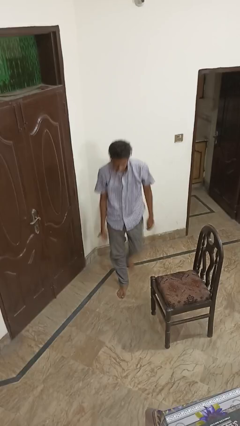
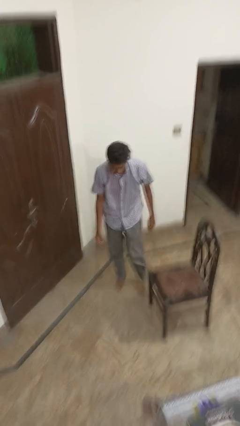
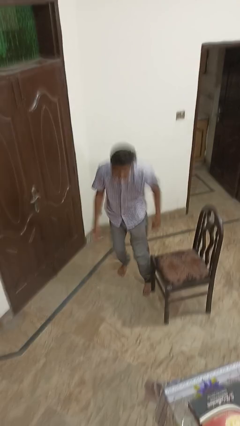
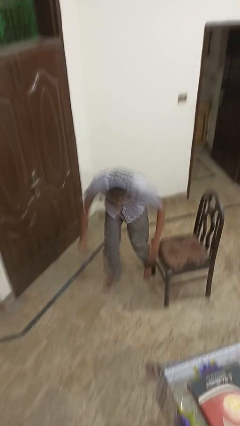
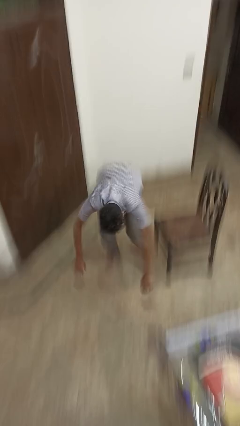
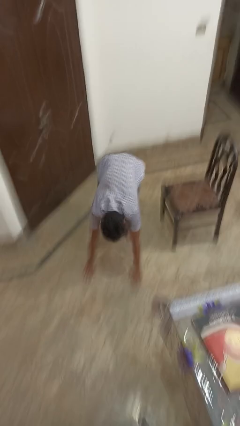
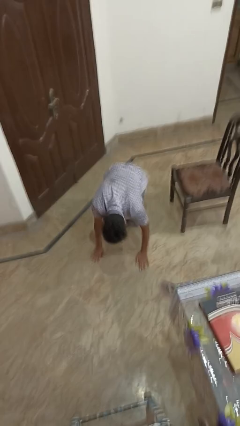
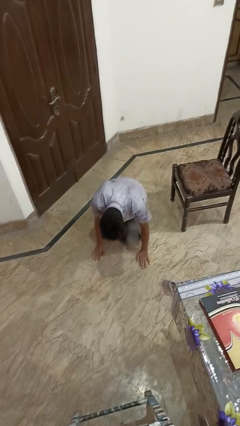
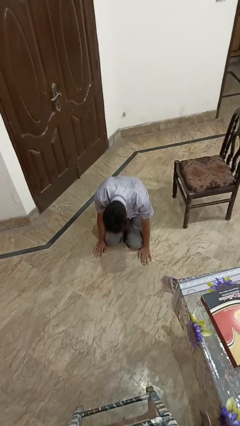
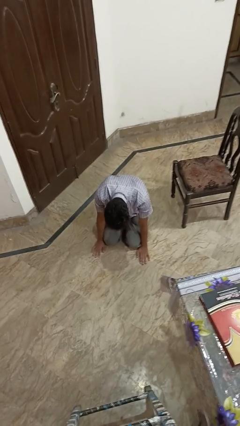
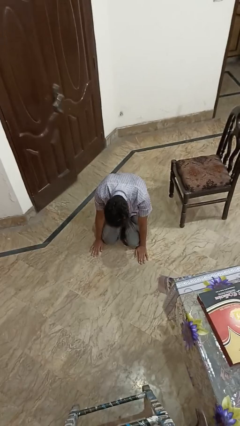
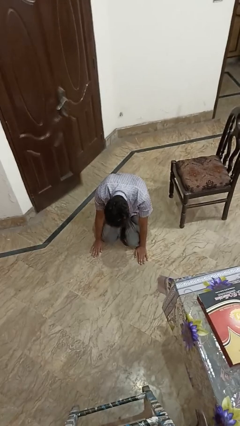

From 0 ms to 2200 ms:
person trips on object on floor

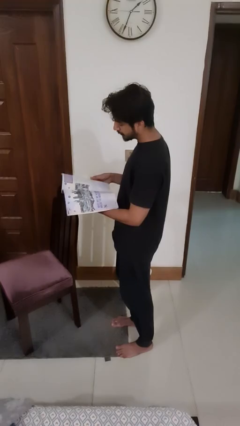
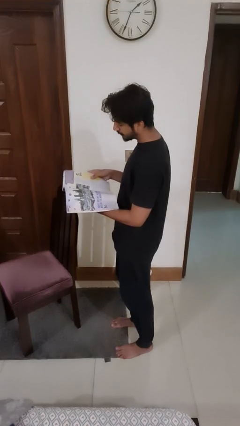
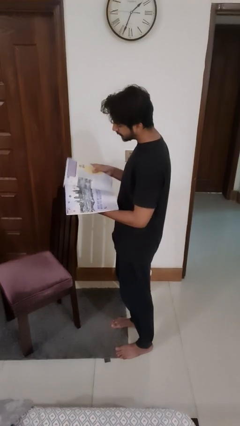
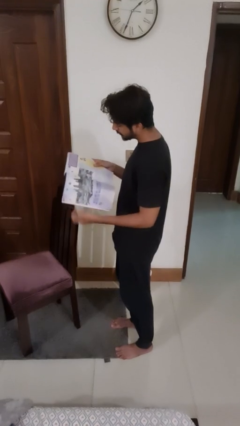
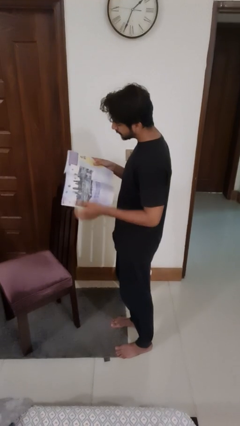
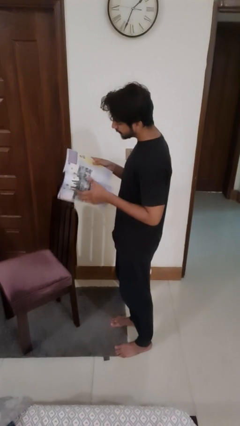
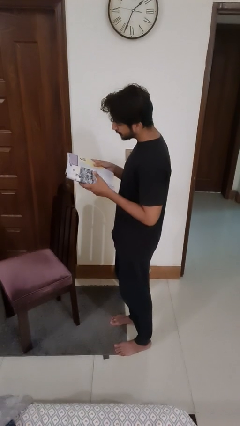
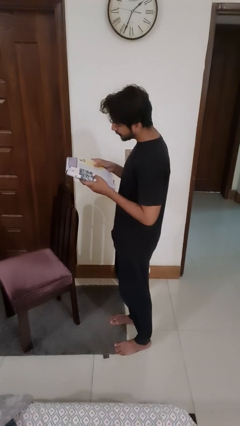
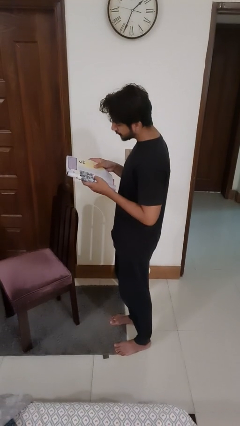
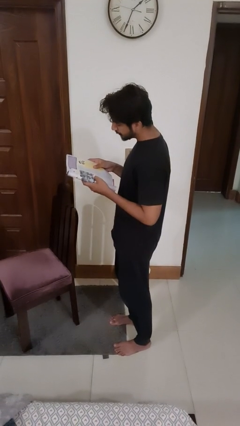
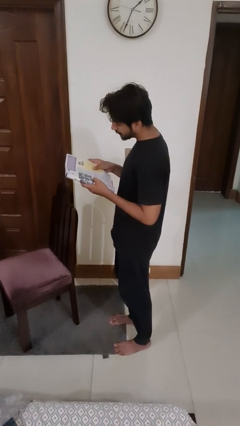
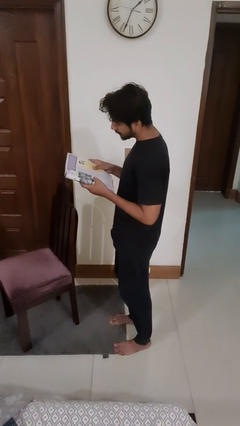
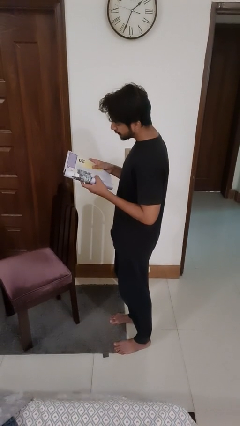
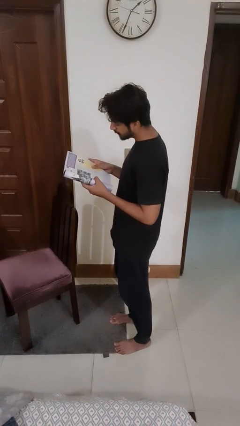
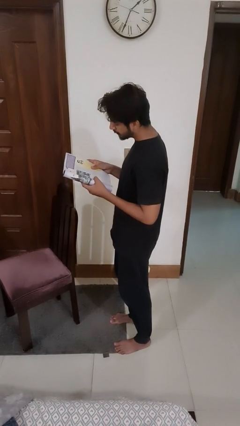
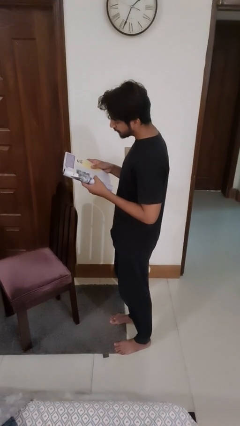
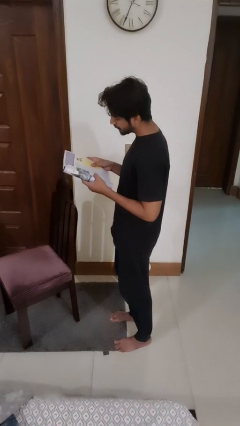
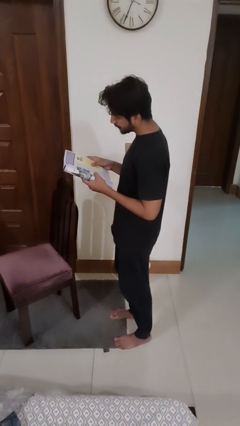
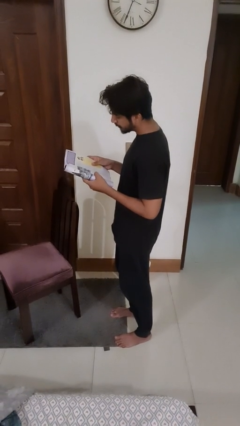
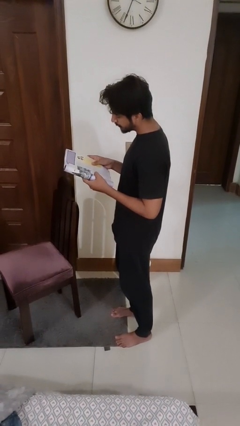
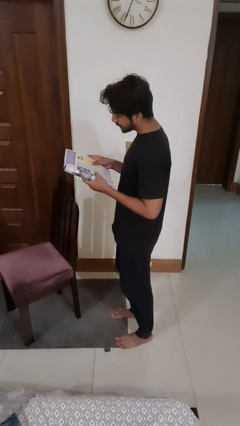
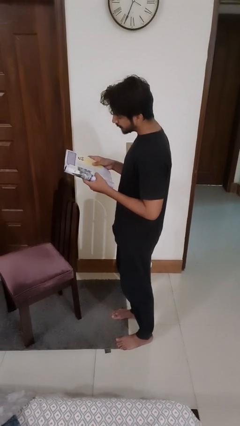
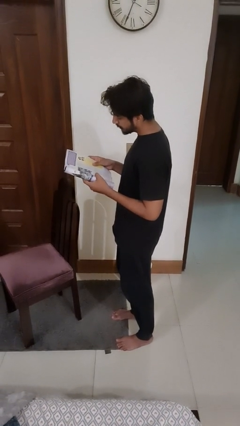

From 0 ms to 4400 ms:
person reads magazine

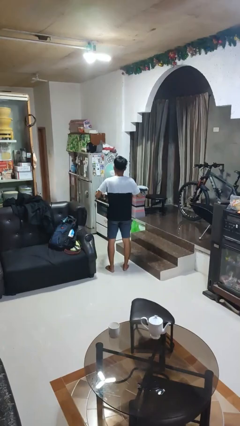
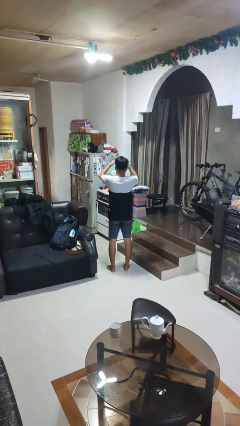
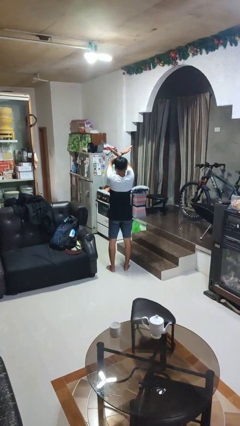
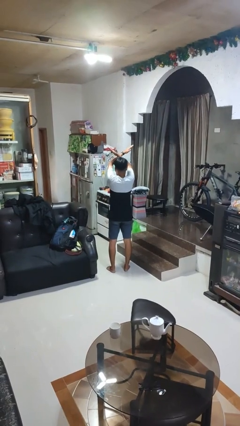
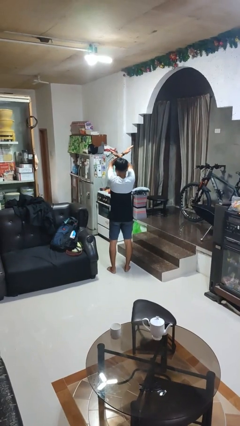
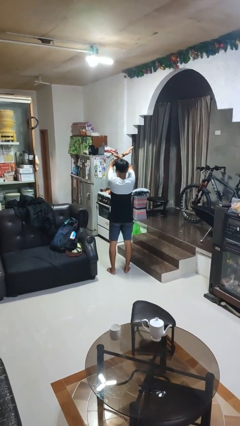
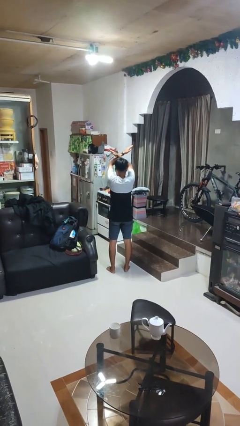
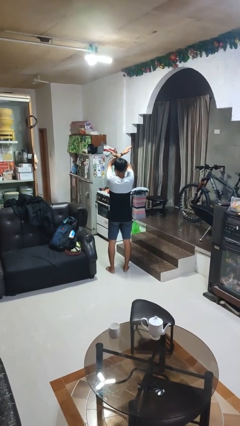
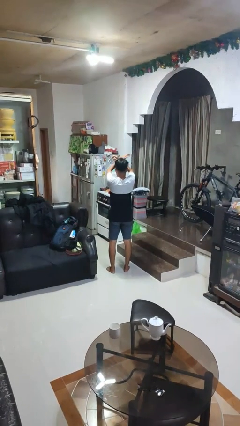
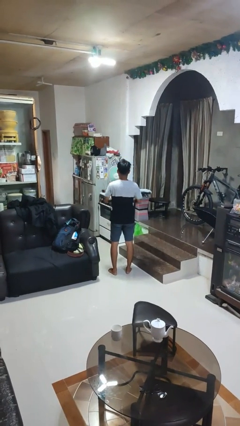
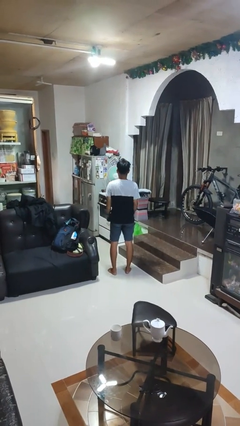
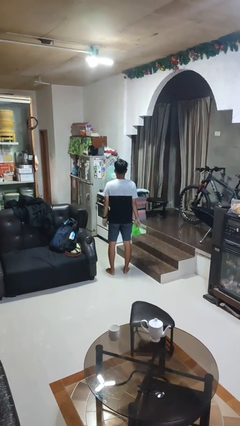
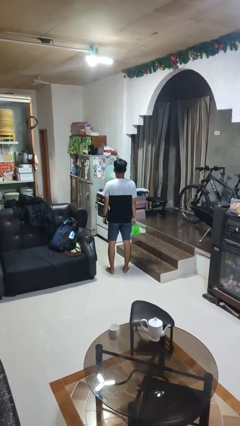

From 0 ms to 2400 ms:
person gestures arms x

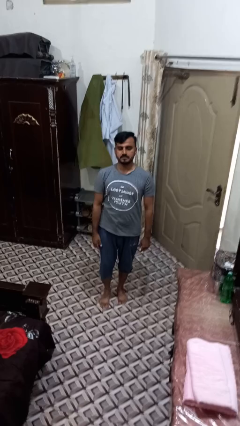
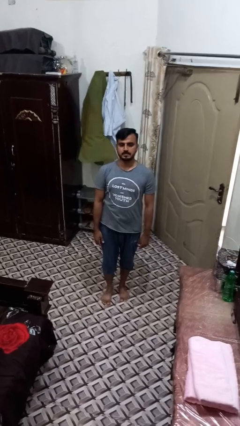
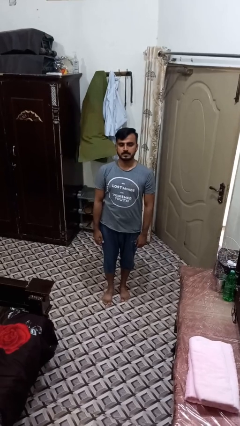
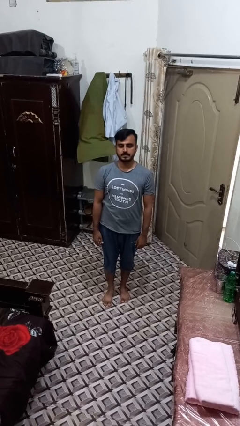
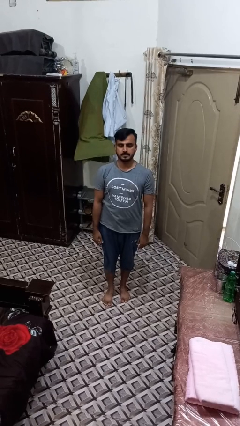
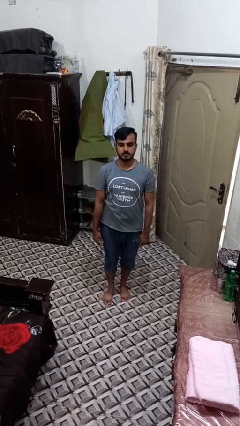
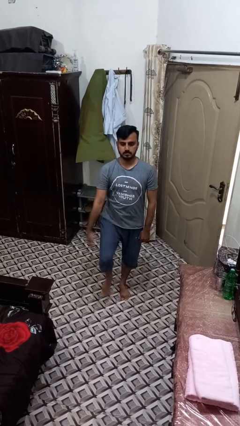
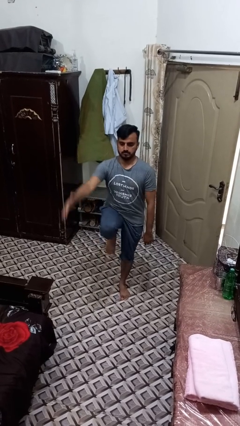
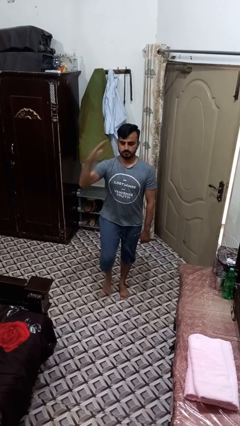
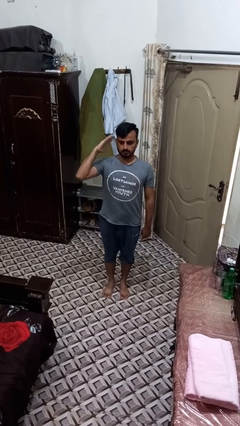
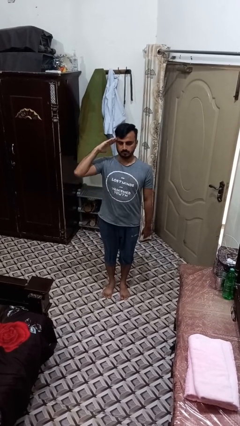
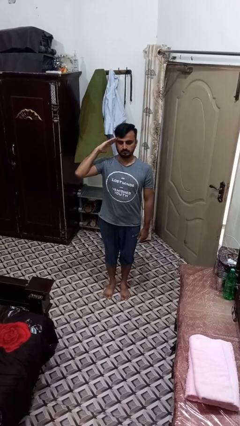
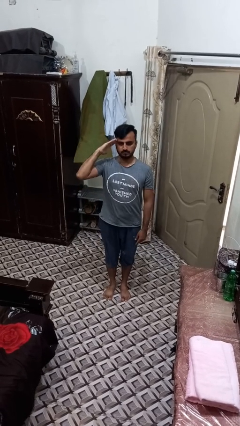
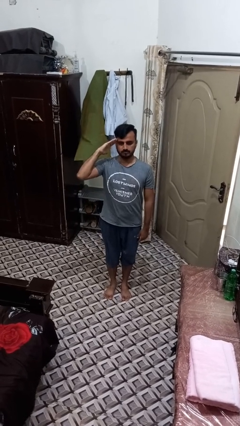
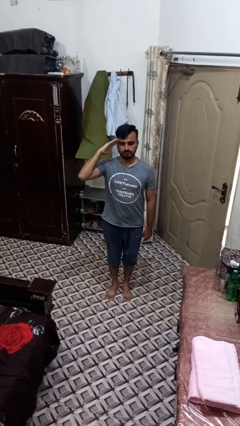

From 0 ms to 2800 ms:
person salutes

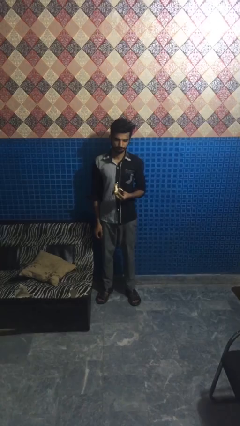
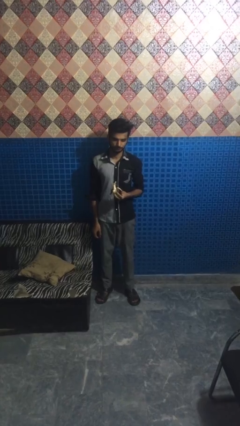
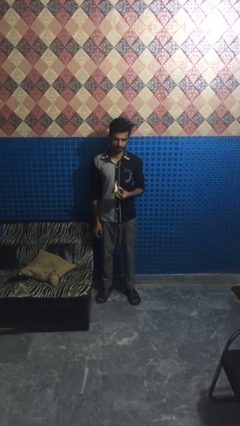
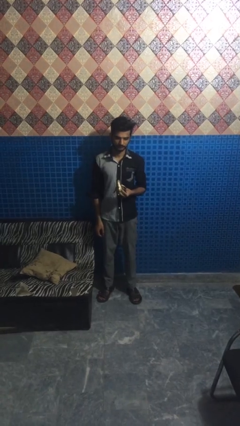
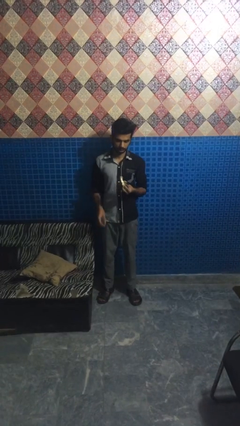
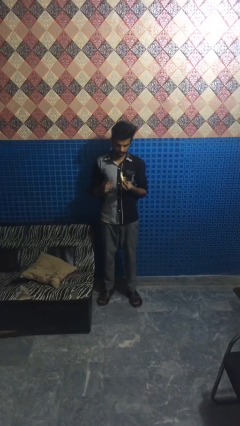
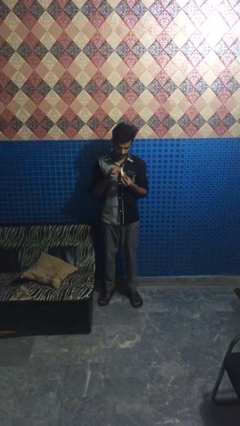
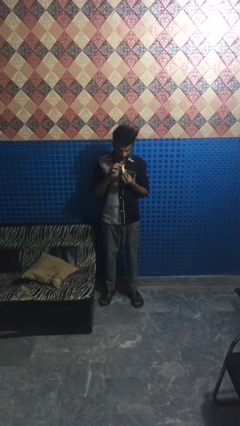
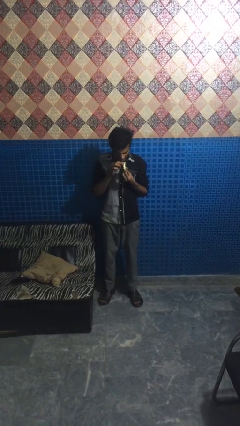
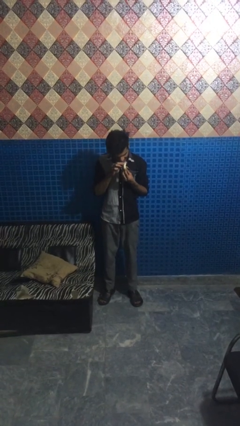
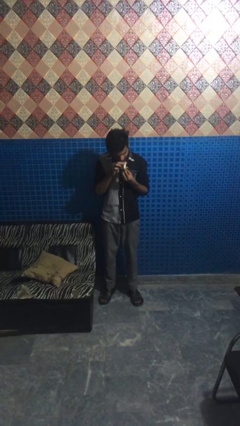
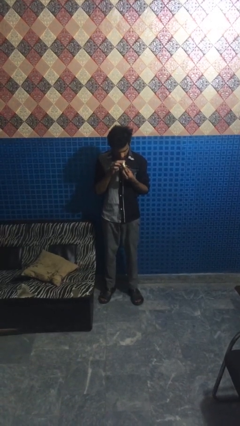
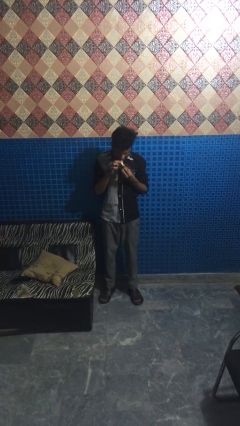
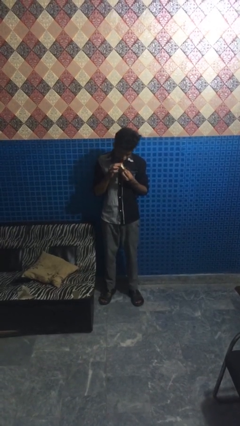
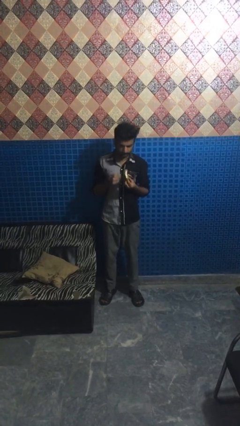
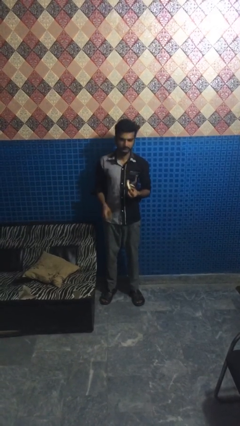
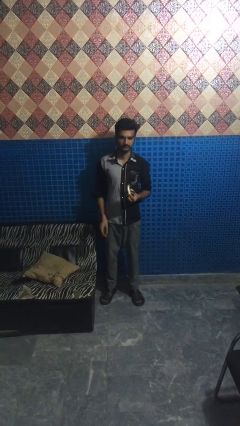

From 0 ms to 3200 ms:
person eats banana

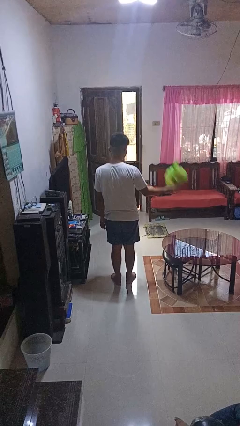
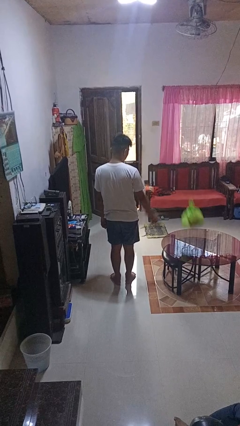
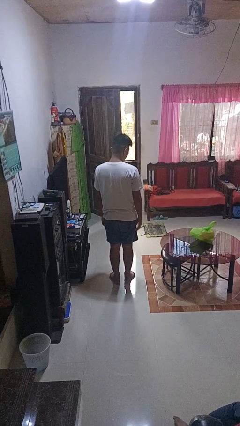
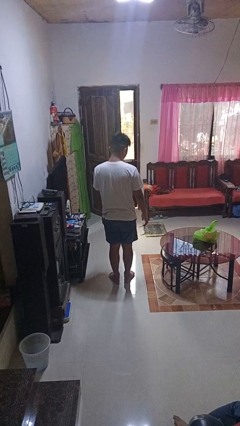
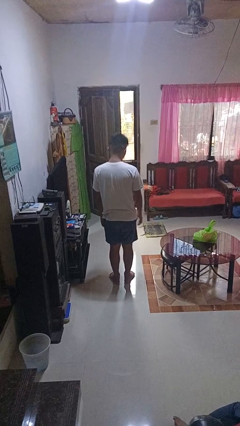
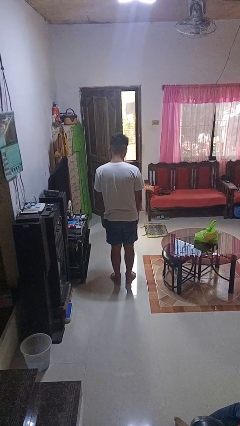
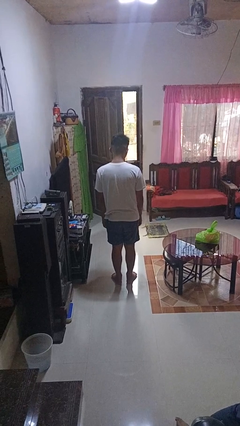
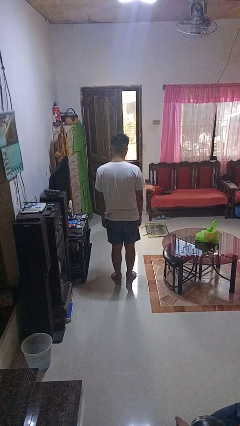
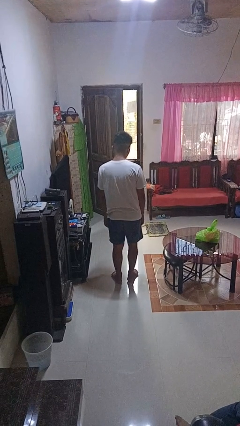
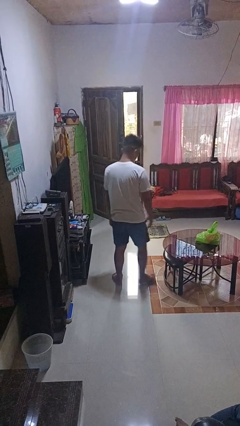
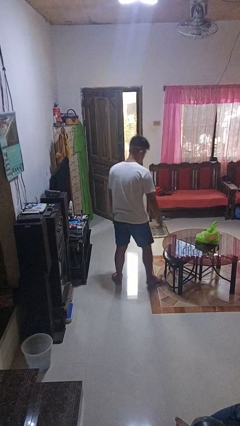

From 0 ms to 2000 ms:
person throws object on table
